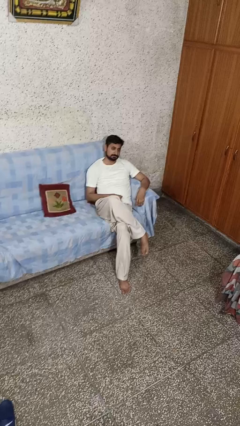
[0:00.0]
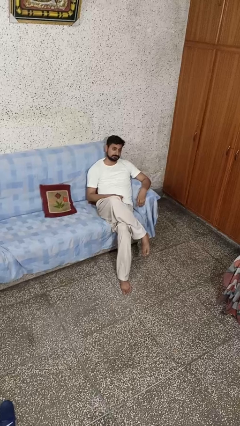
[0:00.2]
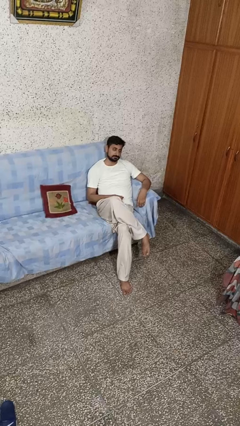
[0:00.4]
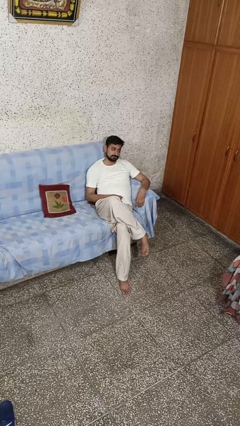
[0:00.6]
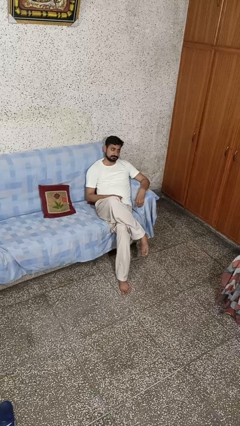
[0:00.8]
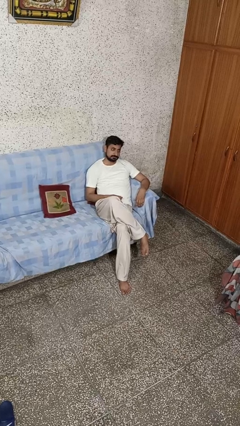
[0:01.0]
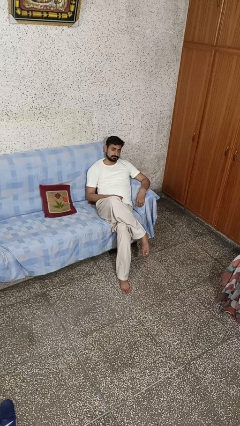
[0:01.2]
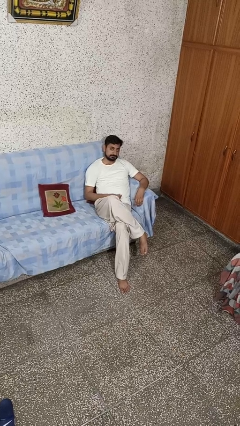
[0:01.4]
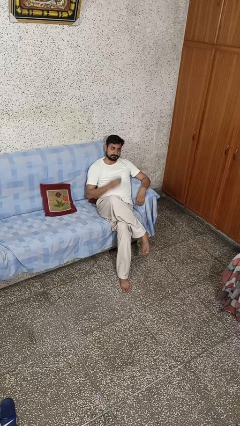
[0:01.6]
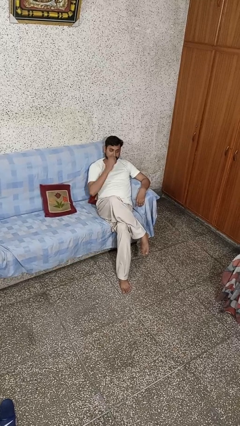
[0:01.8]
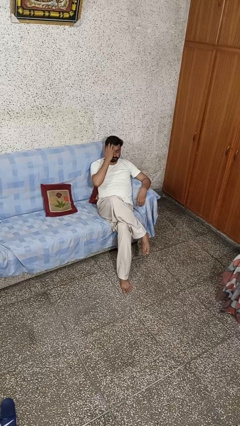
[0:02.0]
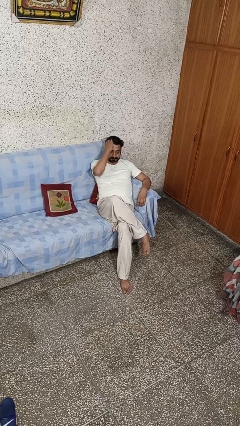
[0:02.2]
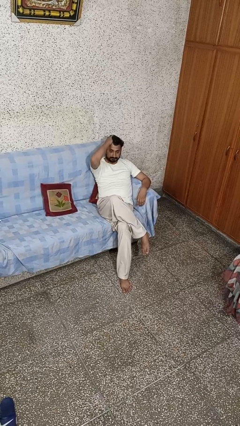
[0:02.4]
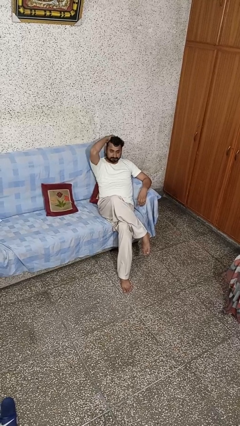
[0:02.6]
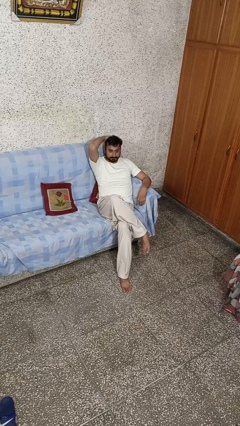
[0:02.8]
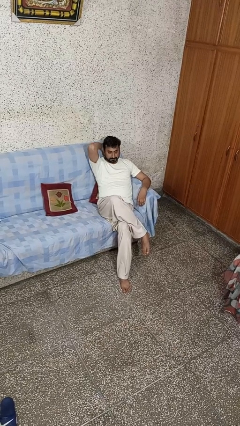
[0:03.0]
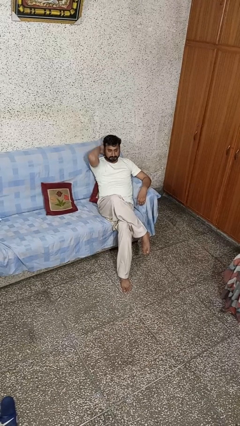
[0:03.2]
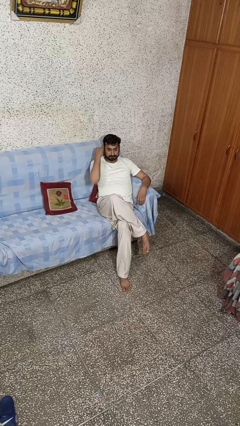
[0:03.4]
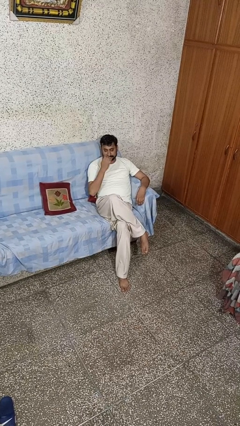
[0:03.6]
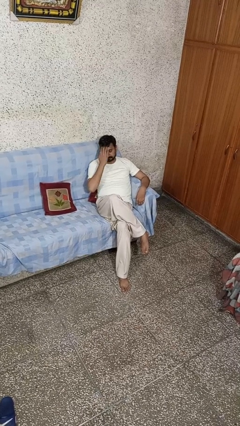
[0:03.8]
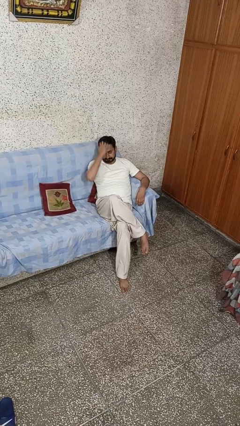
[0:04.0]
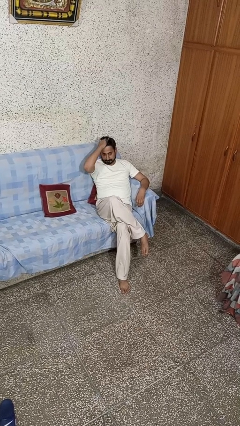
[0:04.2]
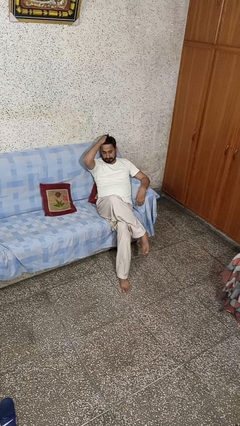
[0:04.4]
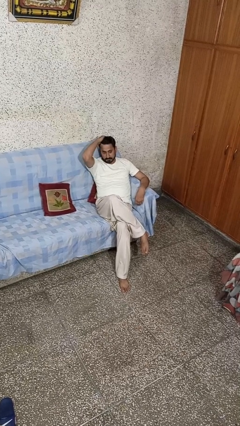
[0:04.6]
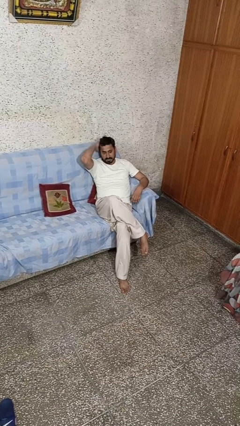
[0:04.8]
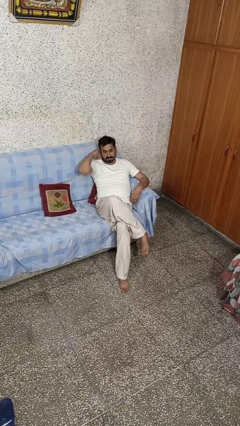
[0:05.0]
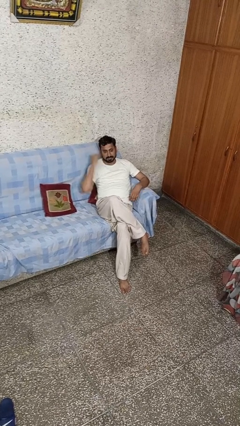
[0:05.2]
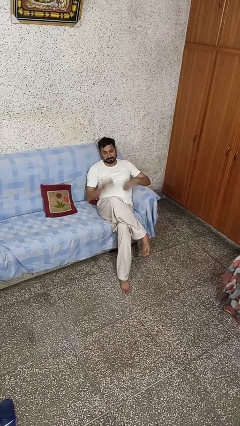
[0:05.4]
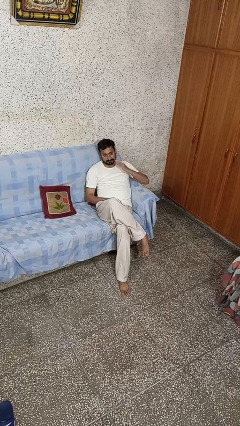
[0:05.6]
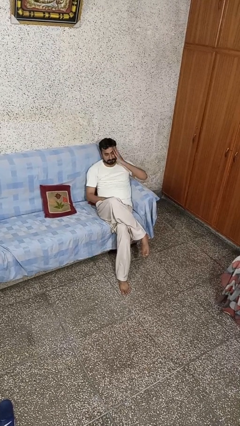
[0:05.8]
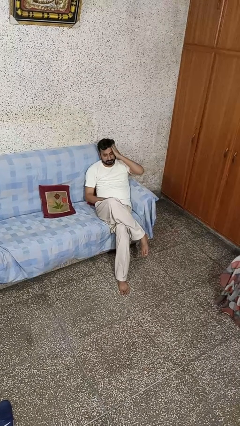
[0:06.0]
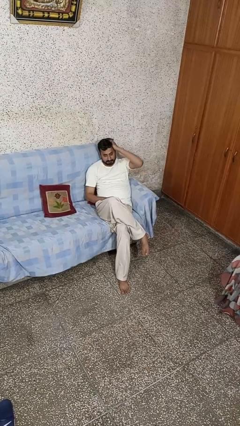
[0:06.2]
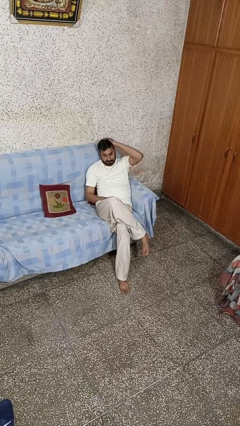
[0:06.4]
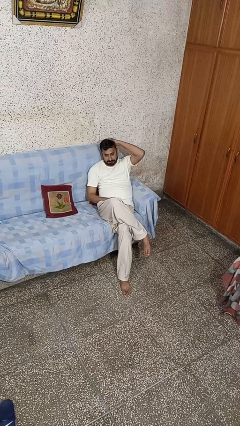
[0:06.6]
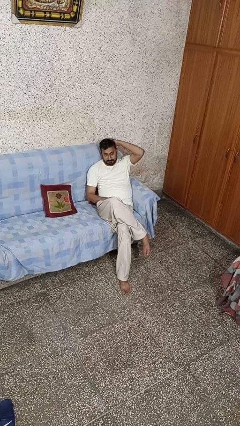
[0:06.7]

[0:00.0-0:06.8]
person strokes hair

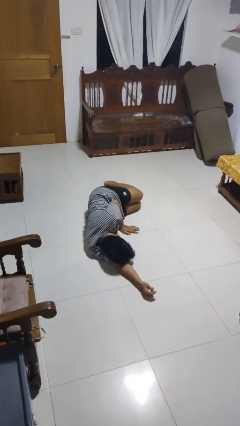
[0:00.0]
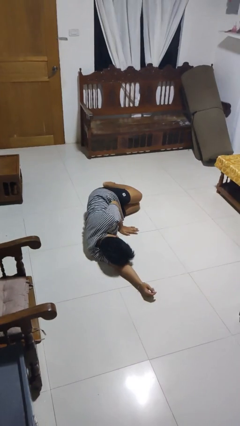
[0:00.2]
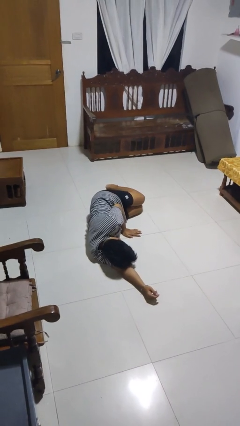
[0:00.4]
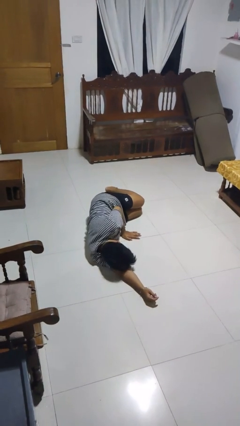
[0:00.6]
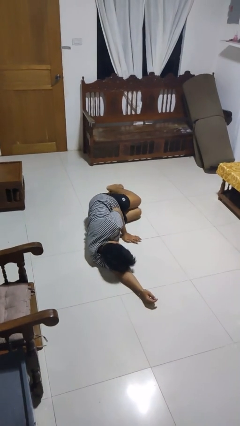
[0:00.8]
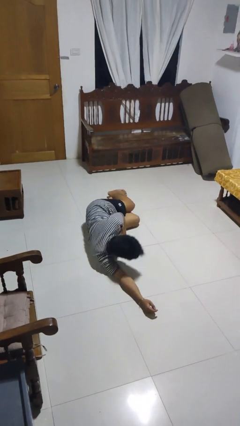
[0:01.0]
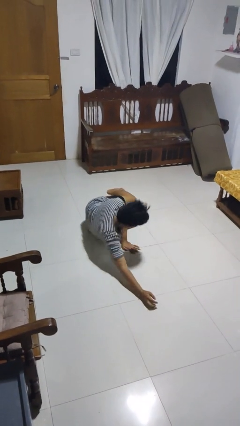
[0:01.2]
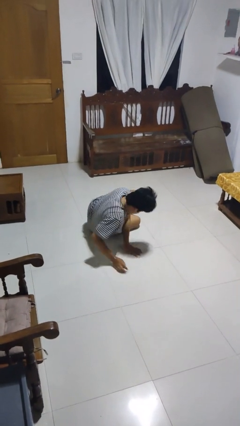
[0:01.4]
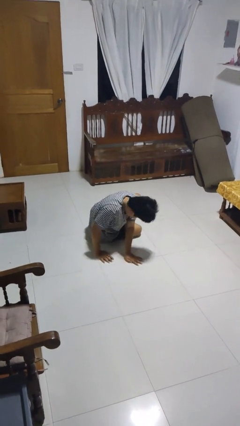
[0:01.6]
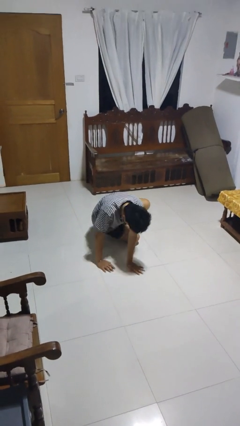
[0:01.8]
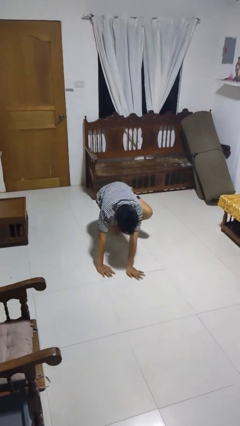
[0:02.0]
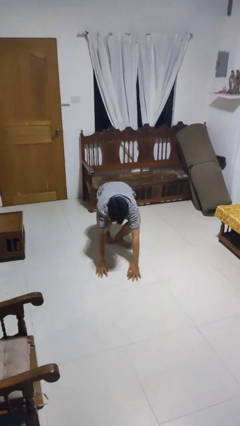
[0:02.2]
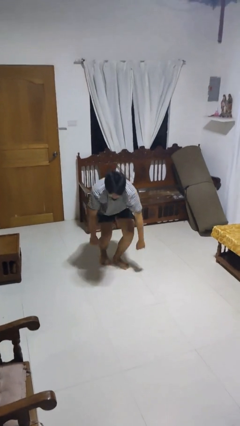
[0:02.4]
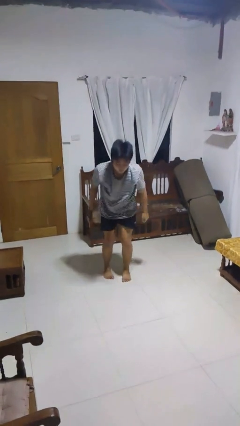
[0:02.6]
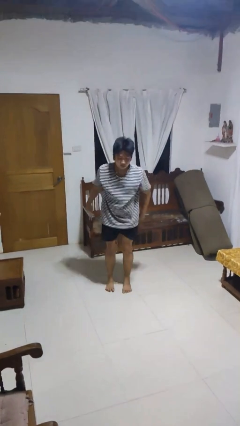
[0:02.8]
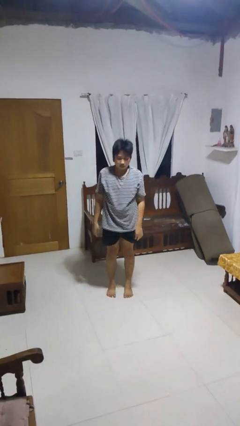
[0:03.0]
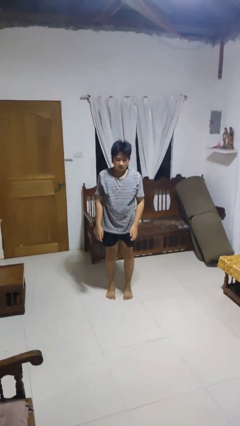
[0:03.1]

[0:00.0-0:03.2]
person stands up from floor

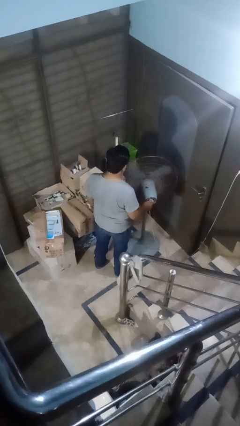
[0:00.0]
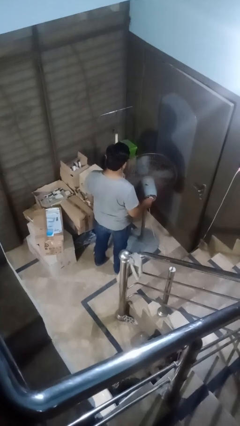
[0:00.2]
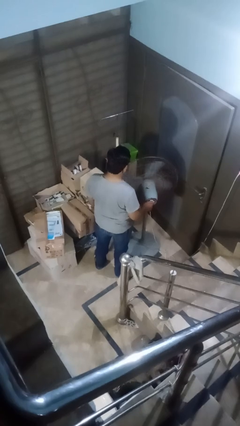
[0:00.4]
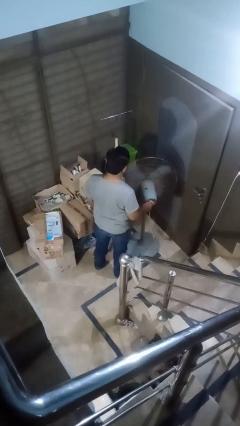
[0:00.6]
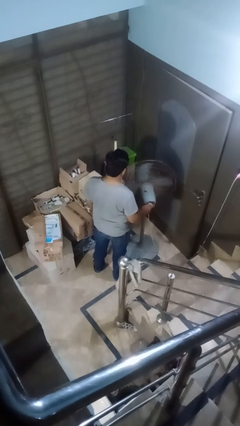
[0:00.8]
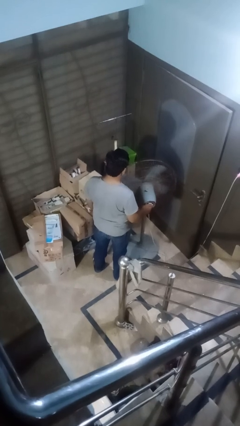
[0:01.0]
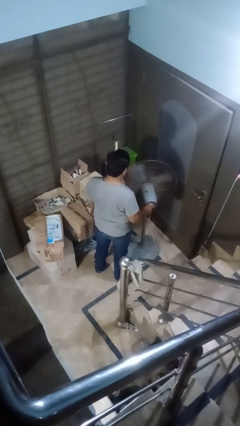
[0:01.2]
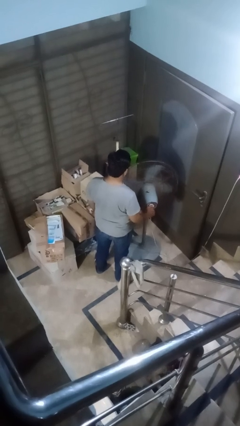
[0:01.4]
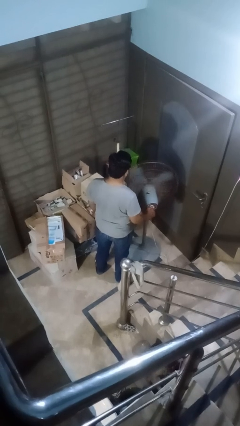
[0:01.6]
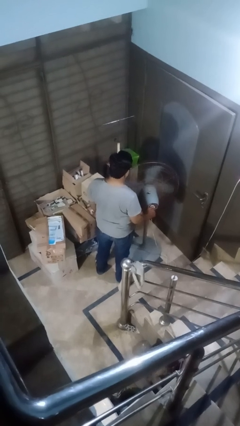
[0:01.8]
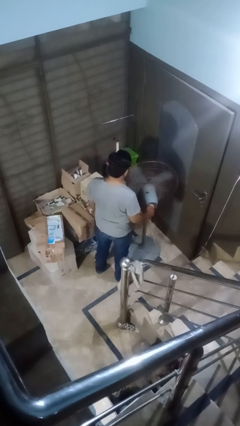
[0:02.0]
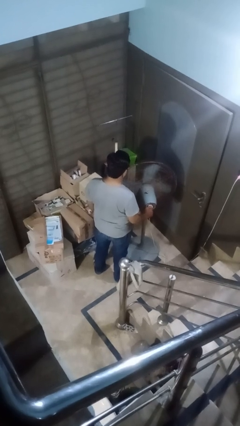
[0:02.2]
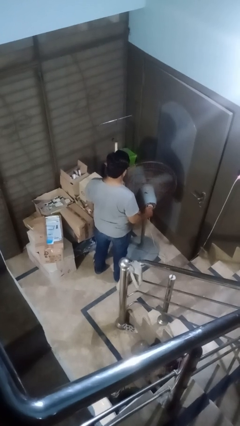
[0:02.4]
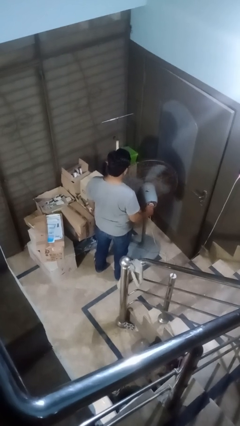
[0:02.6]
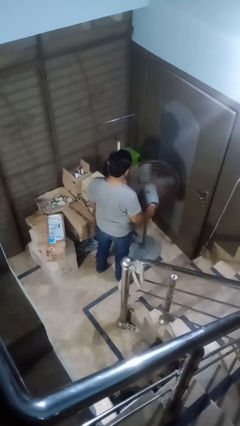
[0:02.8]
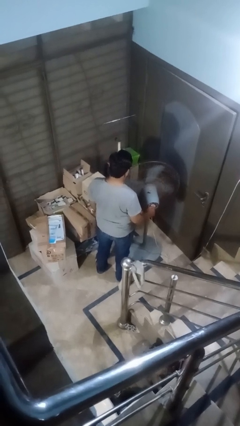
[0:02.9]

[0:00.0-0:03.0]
person turns off fan

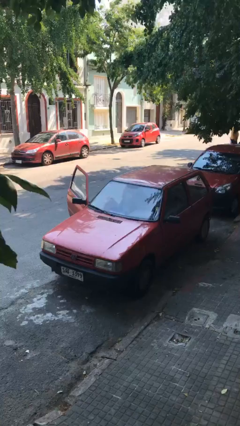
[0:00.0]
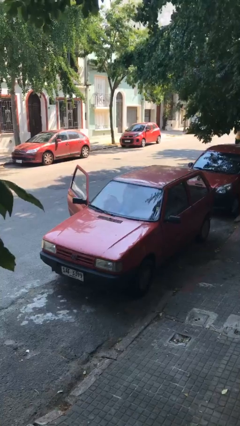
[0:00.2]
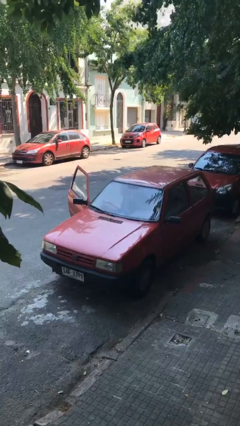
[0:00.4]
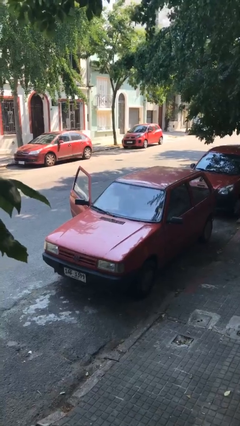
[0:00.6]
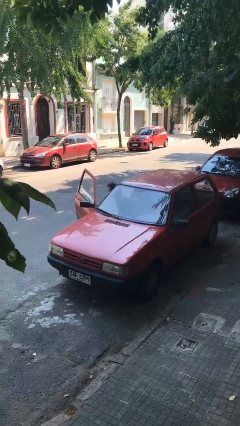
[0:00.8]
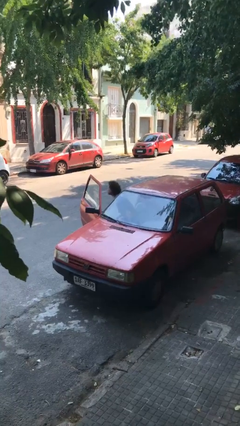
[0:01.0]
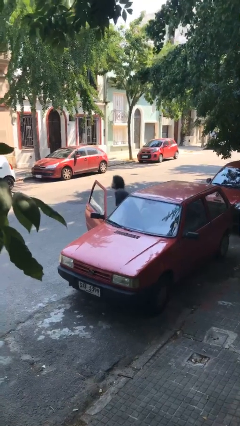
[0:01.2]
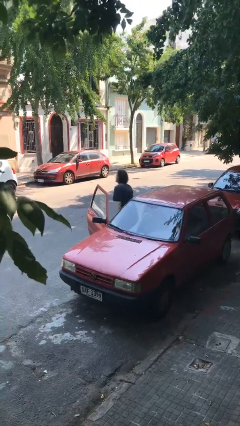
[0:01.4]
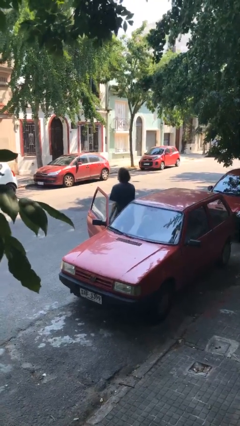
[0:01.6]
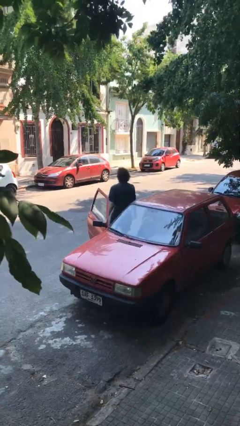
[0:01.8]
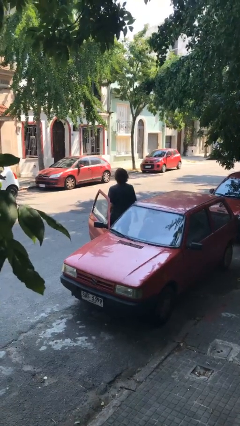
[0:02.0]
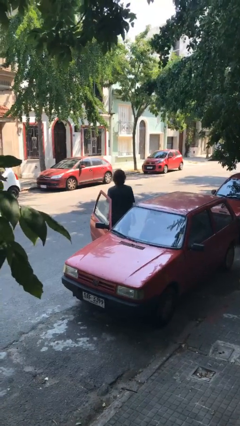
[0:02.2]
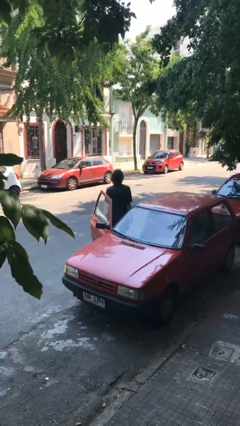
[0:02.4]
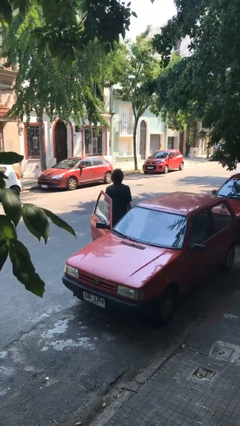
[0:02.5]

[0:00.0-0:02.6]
person exits car

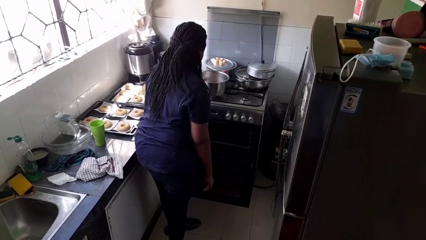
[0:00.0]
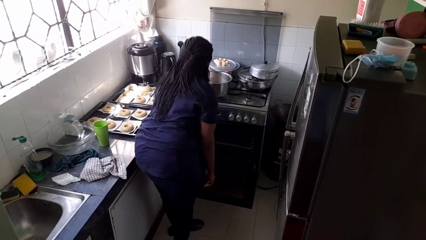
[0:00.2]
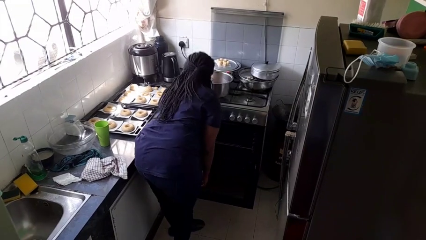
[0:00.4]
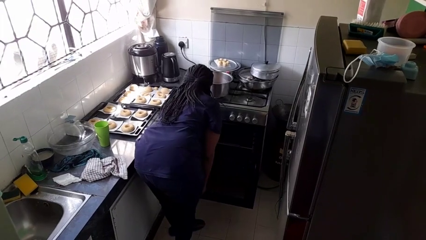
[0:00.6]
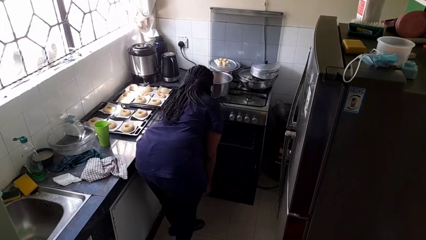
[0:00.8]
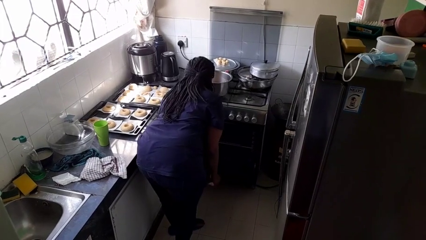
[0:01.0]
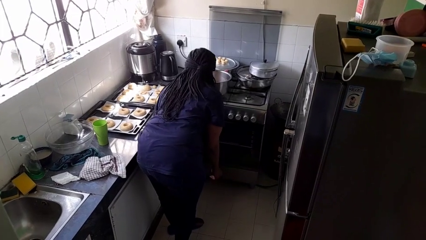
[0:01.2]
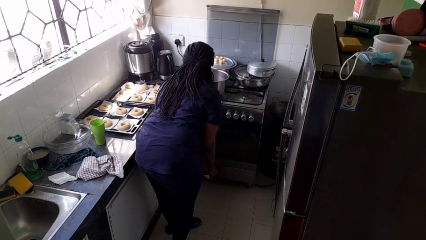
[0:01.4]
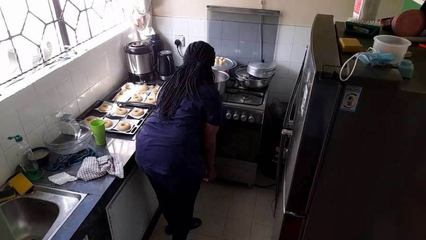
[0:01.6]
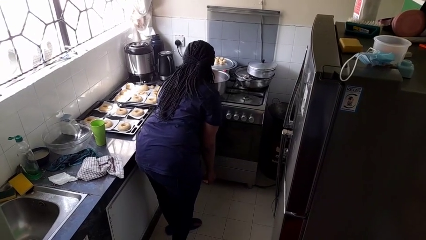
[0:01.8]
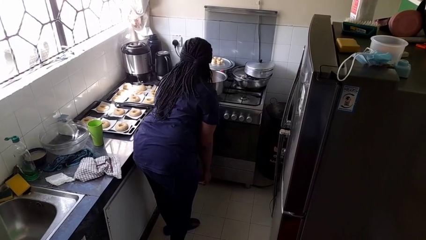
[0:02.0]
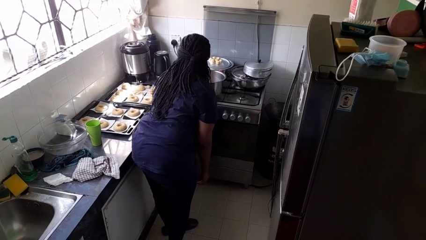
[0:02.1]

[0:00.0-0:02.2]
person closes oven door
